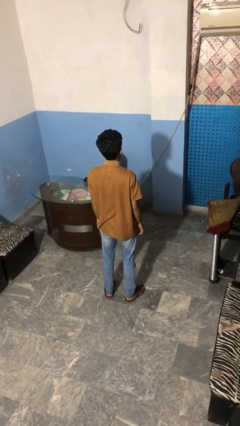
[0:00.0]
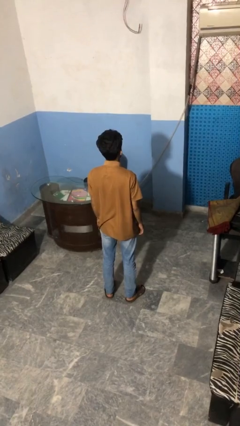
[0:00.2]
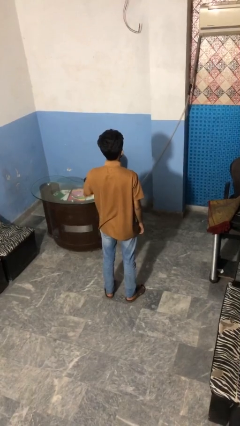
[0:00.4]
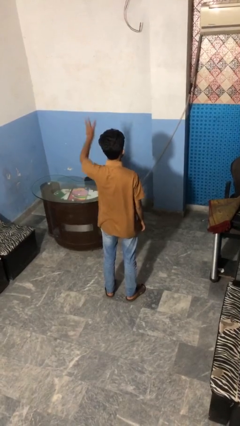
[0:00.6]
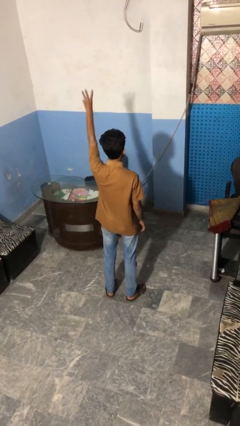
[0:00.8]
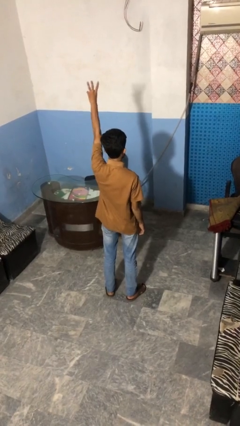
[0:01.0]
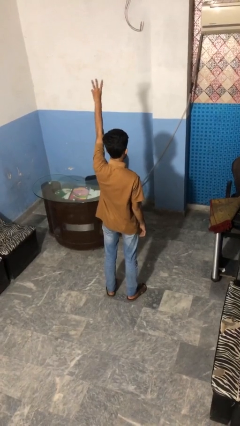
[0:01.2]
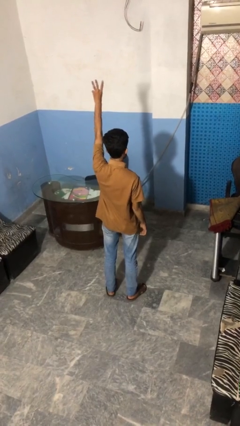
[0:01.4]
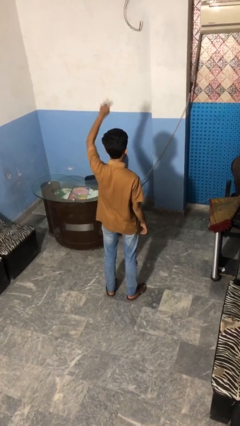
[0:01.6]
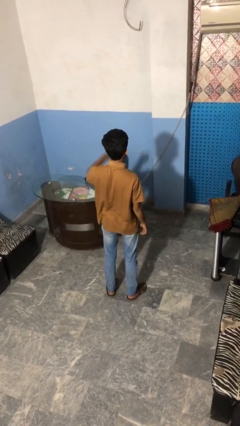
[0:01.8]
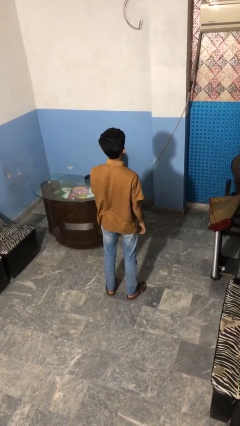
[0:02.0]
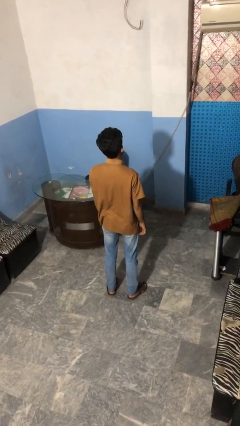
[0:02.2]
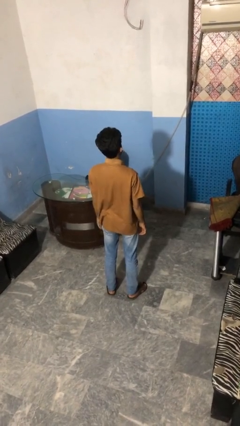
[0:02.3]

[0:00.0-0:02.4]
person gestures number three

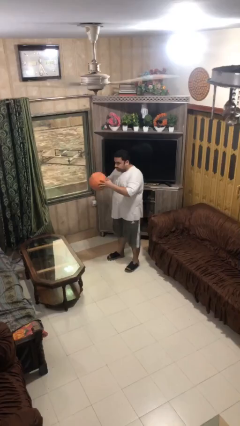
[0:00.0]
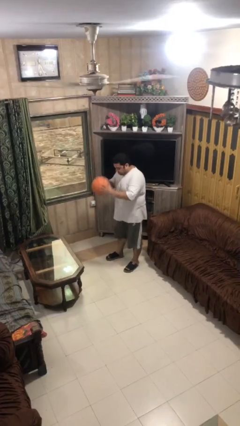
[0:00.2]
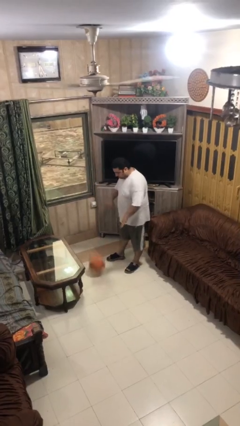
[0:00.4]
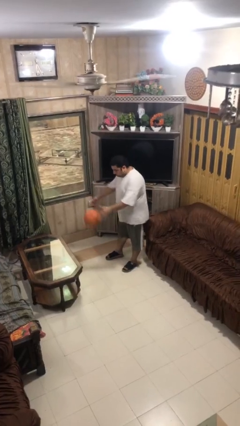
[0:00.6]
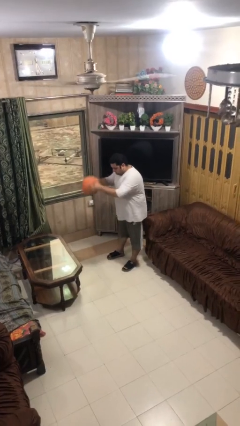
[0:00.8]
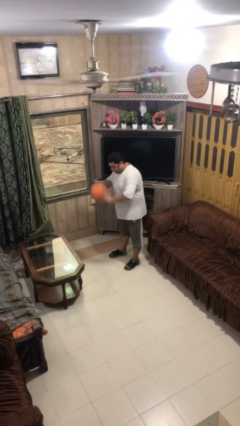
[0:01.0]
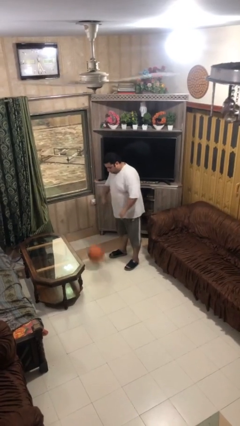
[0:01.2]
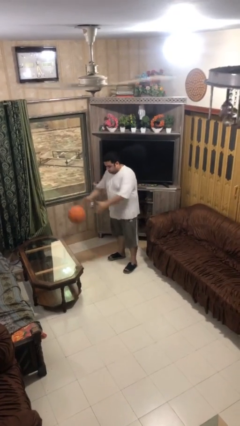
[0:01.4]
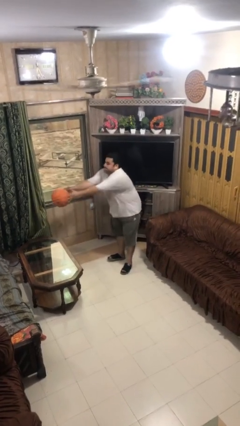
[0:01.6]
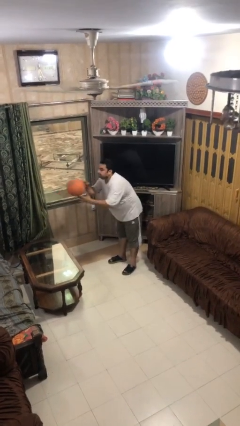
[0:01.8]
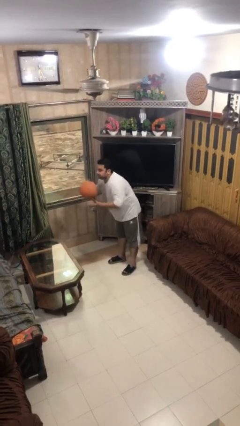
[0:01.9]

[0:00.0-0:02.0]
person bounces ball on floor

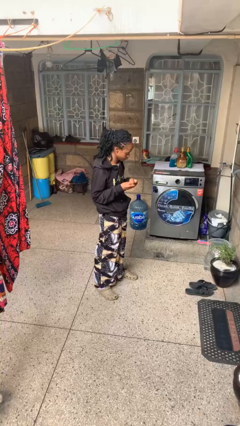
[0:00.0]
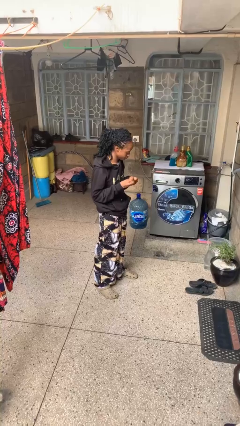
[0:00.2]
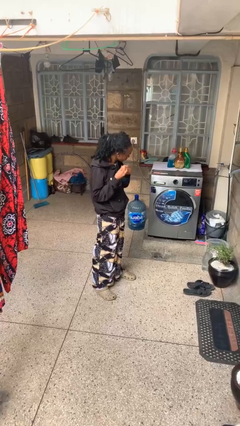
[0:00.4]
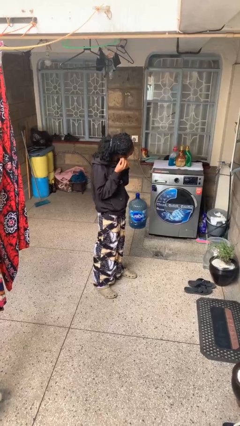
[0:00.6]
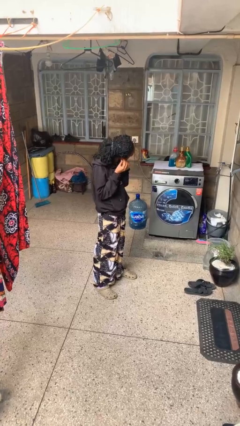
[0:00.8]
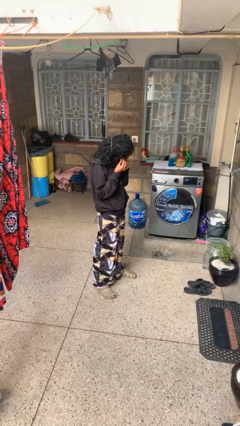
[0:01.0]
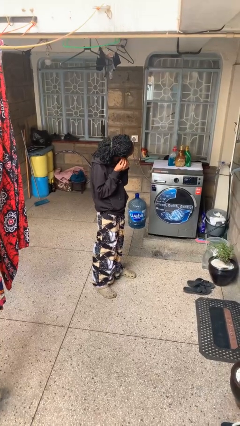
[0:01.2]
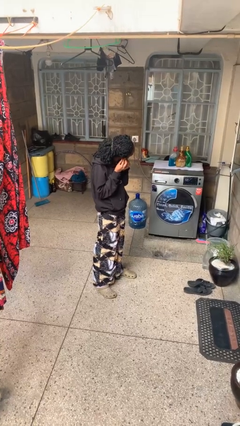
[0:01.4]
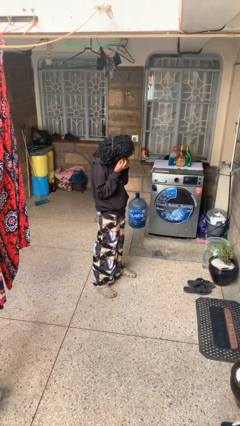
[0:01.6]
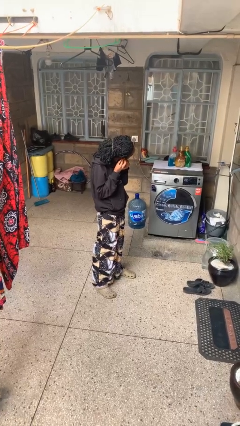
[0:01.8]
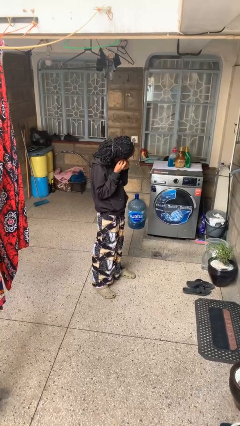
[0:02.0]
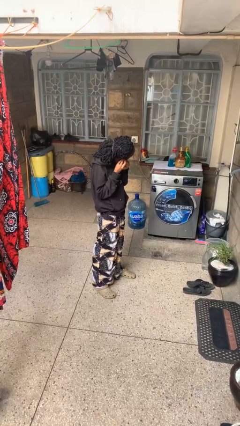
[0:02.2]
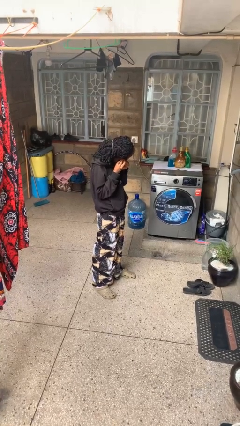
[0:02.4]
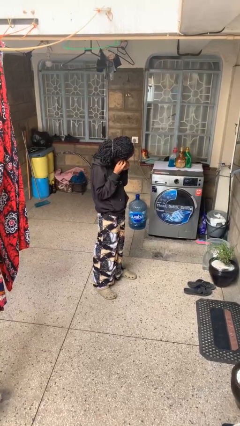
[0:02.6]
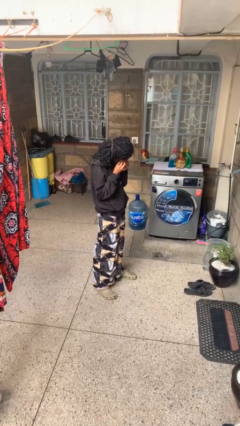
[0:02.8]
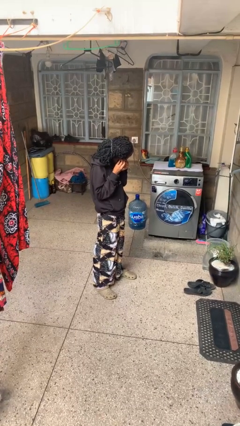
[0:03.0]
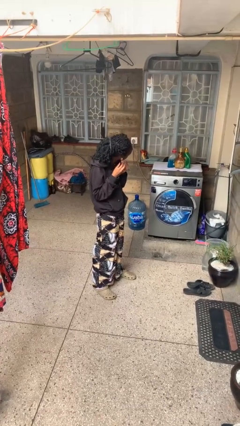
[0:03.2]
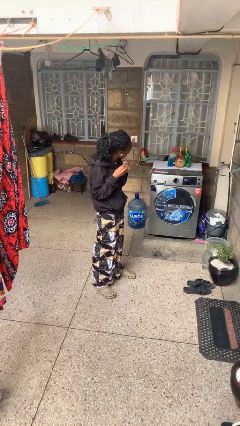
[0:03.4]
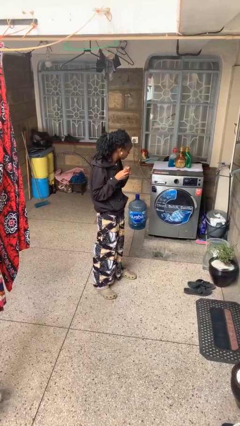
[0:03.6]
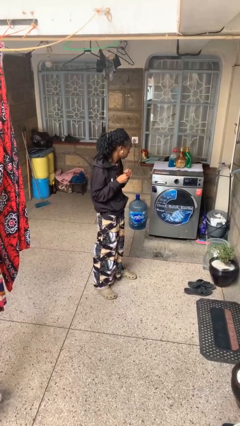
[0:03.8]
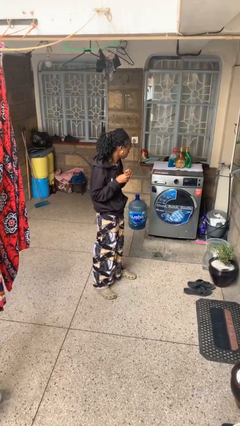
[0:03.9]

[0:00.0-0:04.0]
person puts on earrings

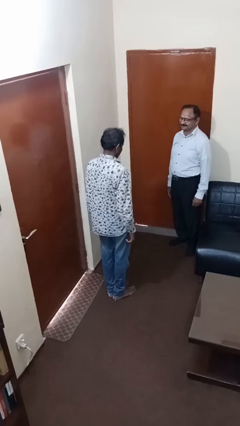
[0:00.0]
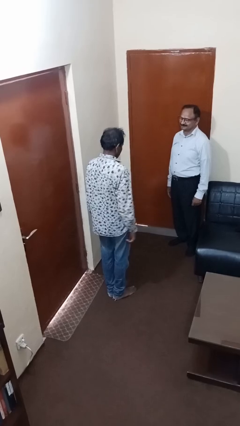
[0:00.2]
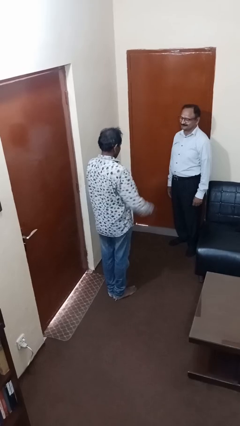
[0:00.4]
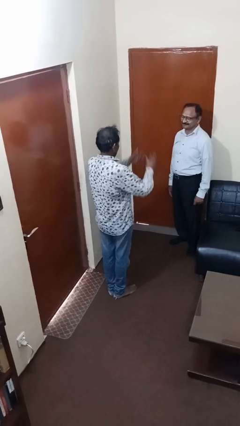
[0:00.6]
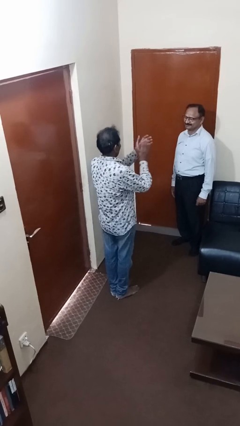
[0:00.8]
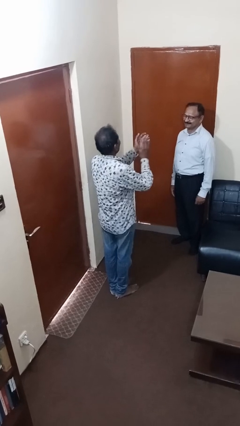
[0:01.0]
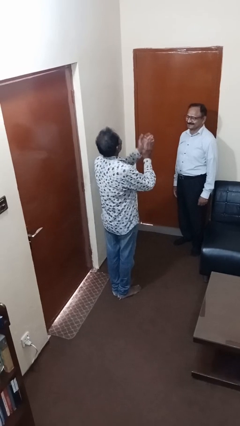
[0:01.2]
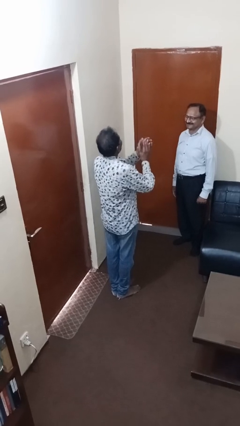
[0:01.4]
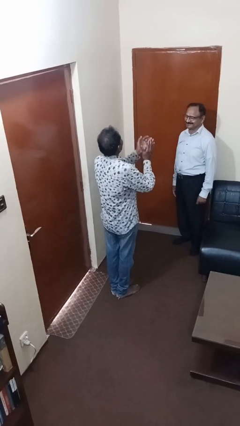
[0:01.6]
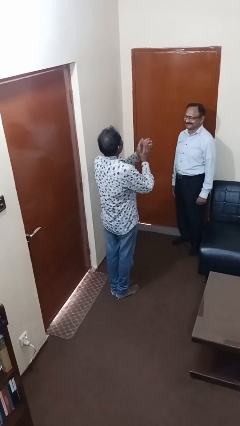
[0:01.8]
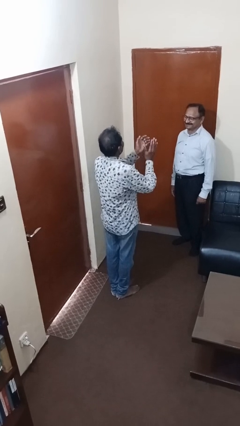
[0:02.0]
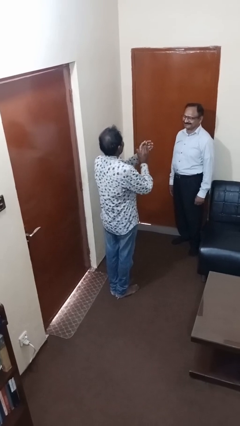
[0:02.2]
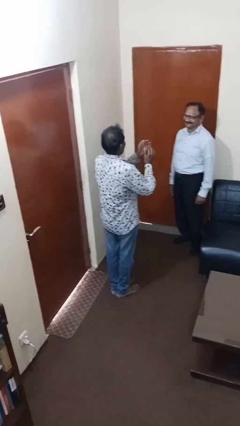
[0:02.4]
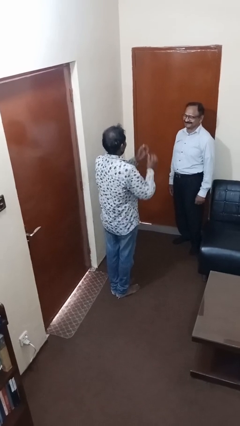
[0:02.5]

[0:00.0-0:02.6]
person laughs with person

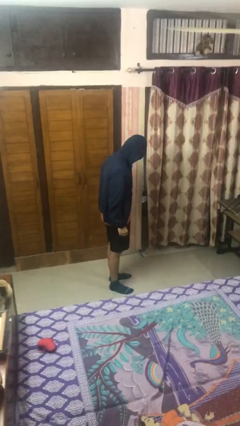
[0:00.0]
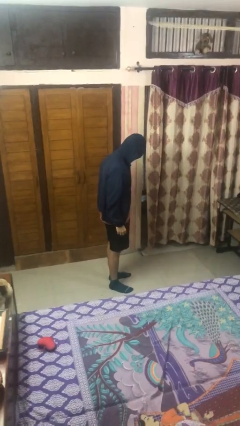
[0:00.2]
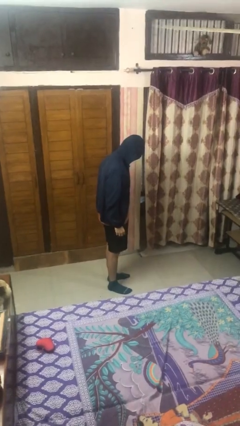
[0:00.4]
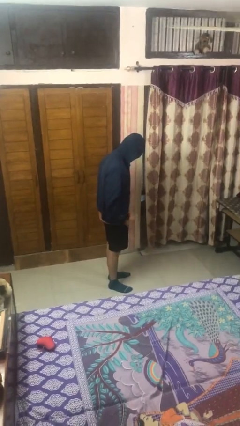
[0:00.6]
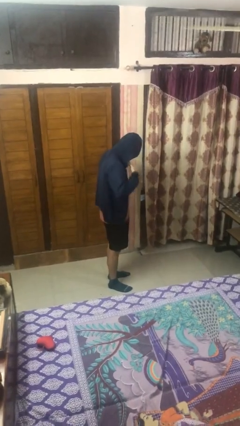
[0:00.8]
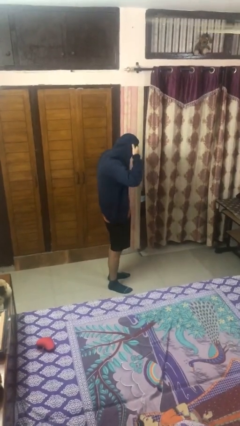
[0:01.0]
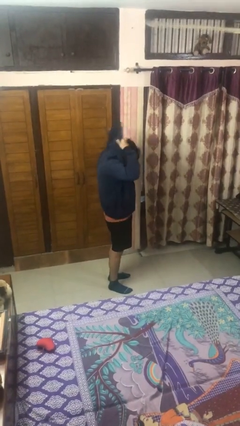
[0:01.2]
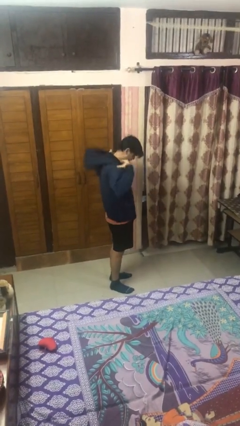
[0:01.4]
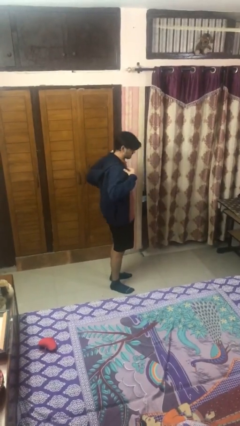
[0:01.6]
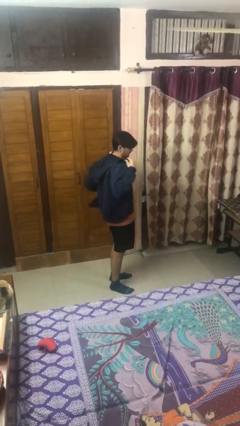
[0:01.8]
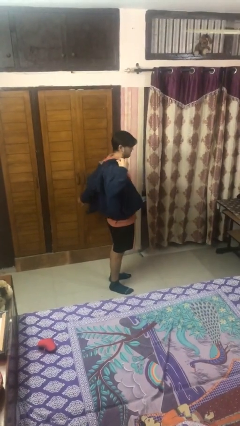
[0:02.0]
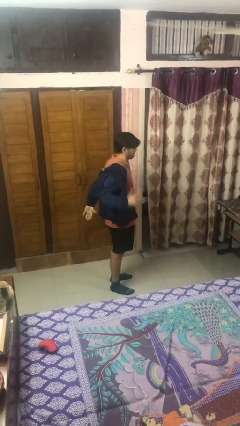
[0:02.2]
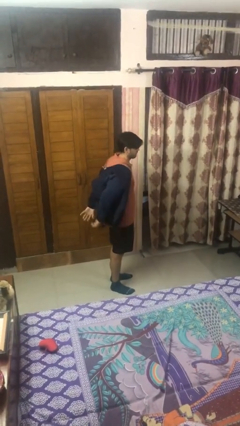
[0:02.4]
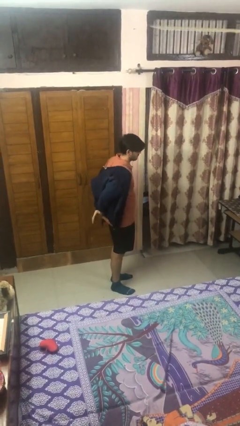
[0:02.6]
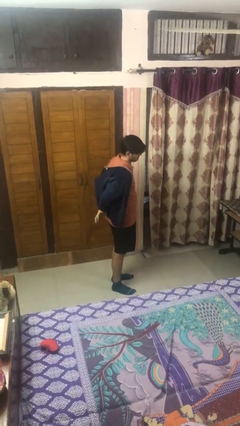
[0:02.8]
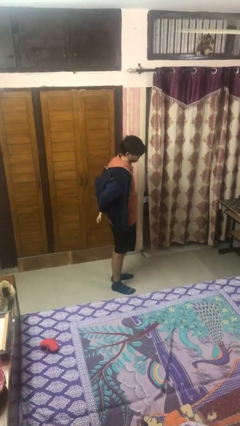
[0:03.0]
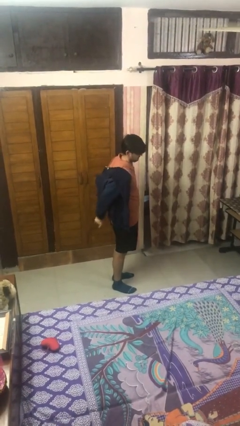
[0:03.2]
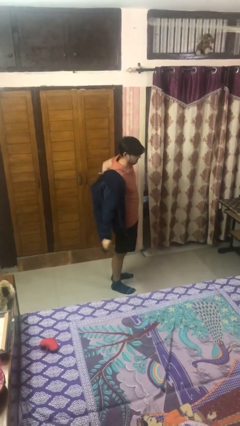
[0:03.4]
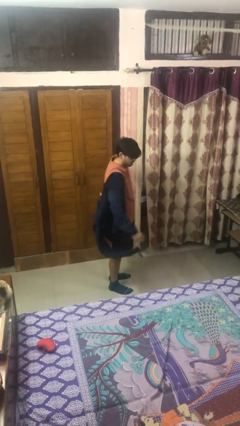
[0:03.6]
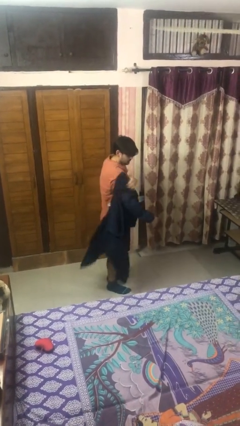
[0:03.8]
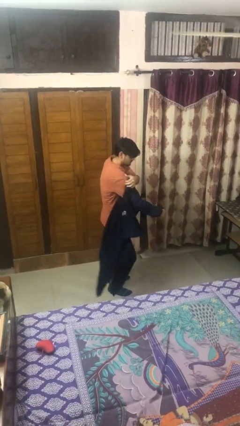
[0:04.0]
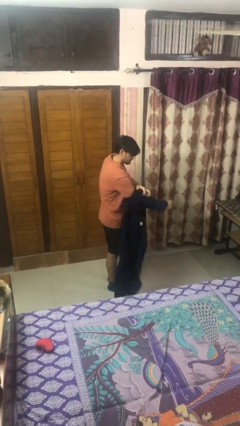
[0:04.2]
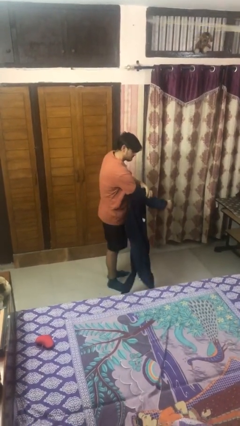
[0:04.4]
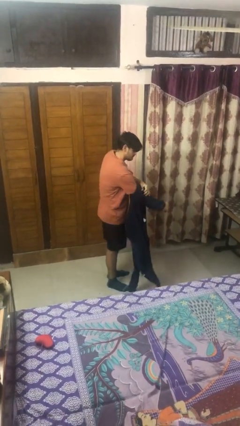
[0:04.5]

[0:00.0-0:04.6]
person takes off hoodie

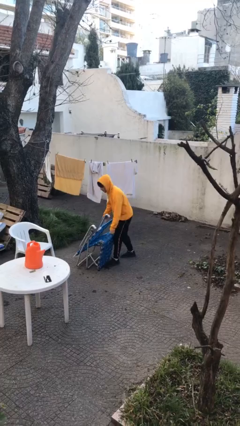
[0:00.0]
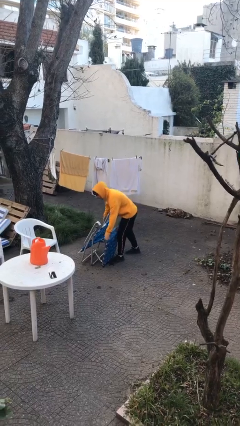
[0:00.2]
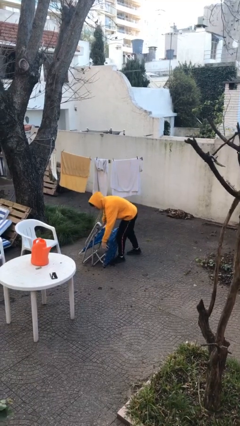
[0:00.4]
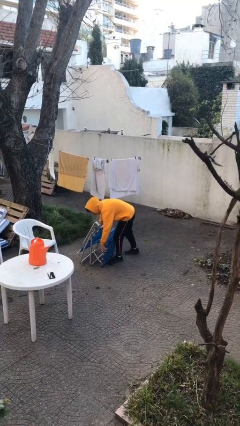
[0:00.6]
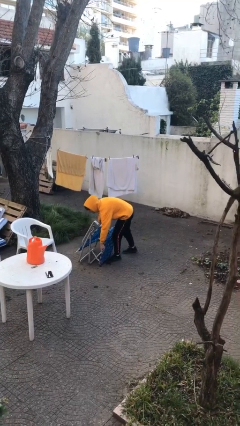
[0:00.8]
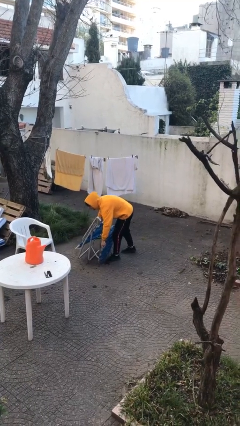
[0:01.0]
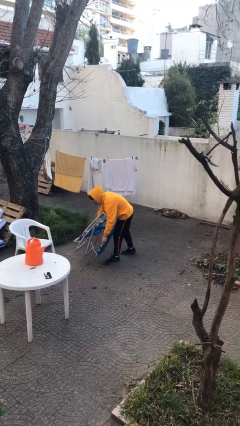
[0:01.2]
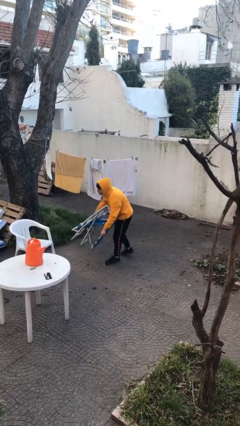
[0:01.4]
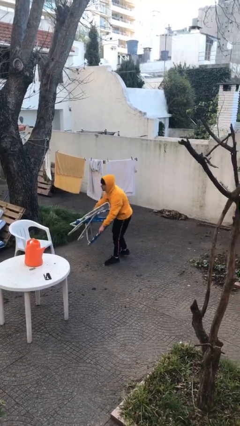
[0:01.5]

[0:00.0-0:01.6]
person picks up object from floor
